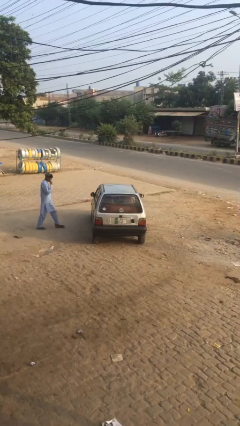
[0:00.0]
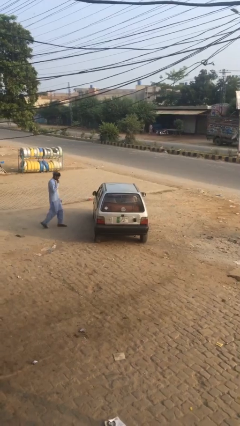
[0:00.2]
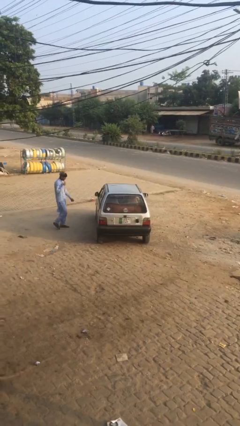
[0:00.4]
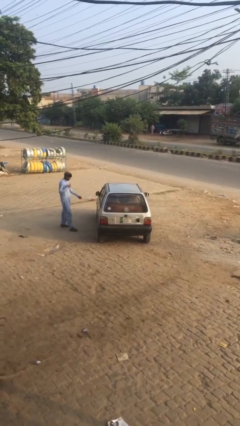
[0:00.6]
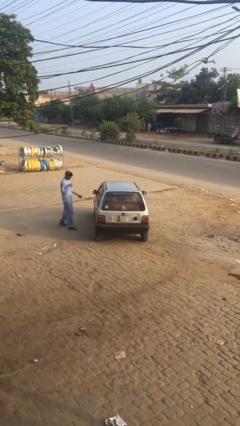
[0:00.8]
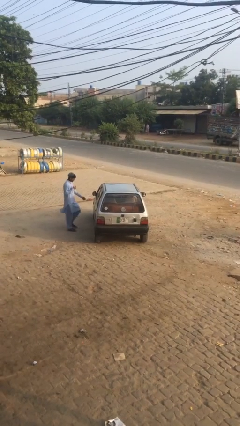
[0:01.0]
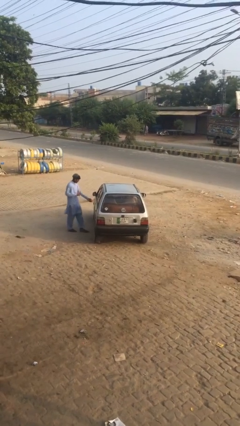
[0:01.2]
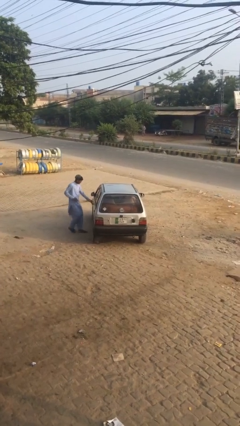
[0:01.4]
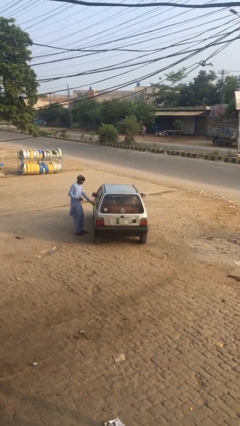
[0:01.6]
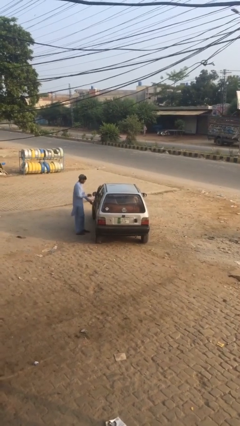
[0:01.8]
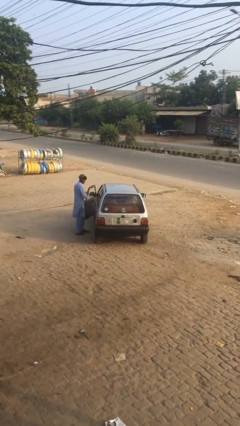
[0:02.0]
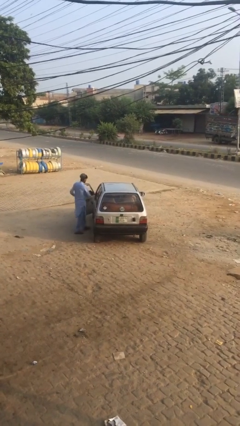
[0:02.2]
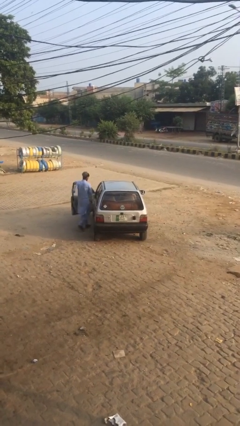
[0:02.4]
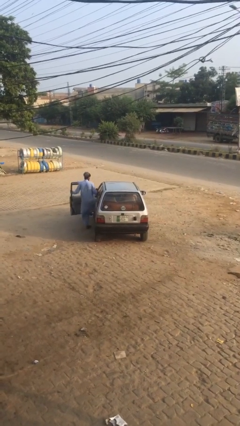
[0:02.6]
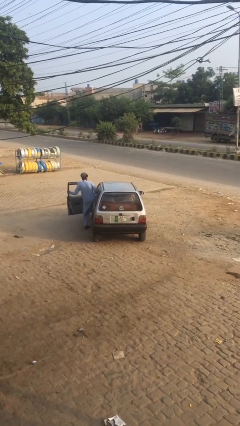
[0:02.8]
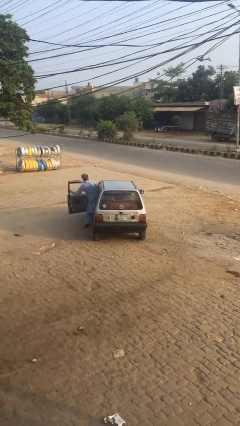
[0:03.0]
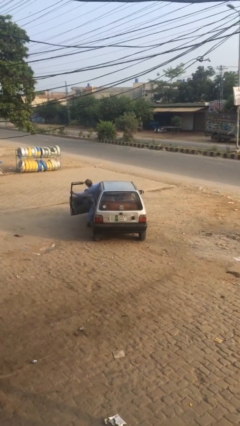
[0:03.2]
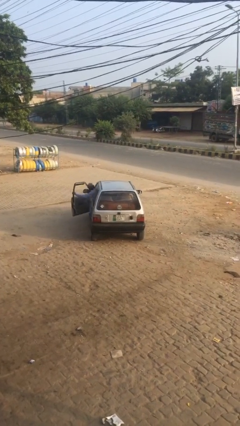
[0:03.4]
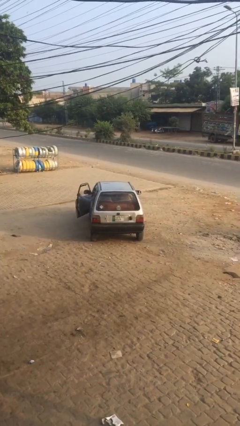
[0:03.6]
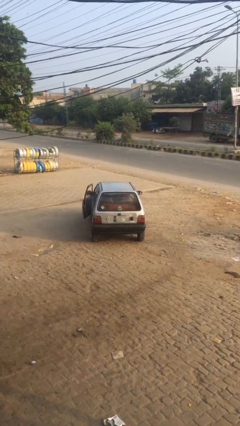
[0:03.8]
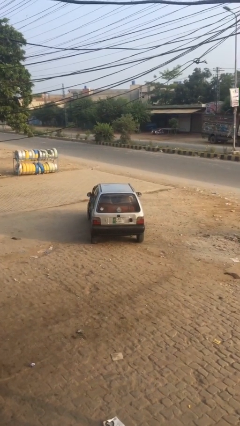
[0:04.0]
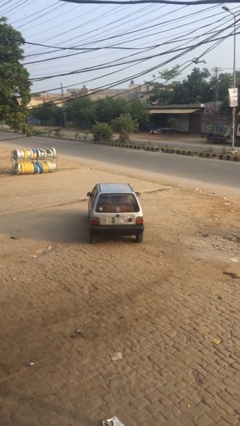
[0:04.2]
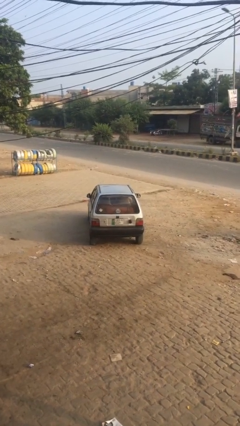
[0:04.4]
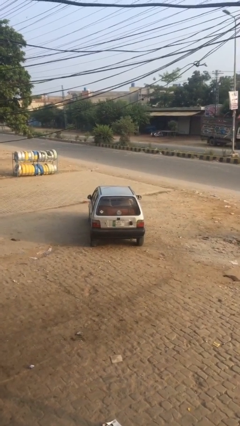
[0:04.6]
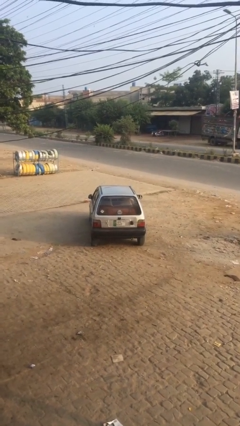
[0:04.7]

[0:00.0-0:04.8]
car picks up person

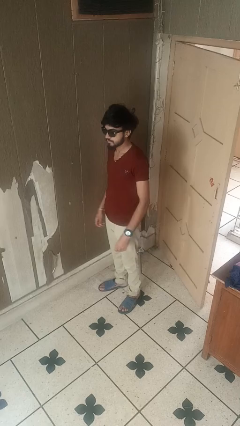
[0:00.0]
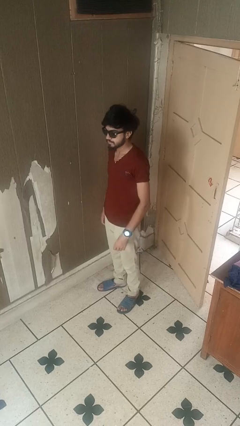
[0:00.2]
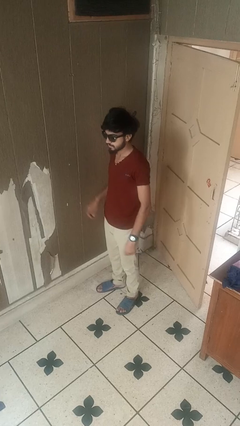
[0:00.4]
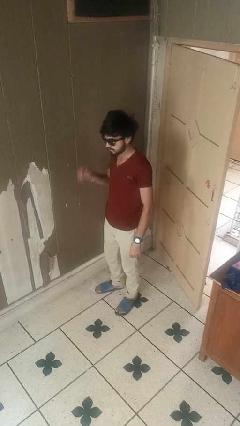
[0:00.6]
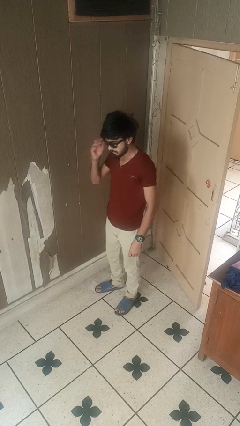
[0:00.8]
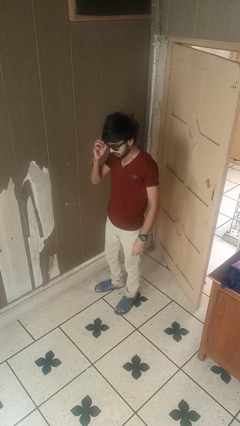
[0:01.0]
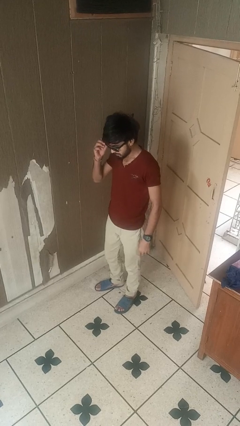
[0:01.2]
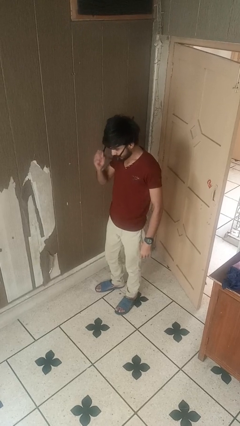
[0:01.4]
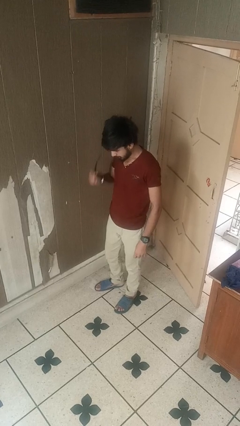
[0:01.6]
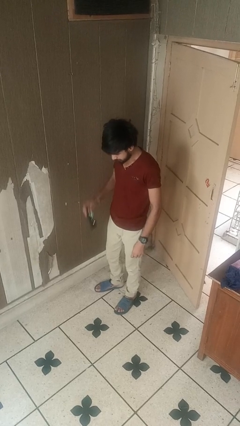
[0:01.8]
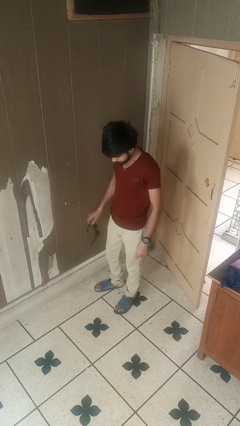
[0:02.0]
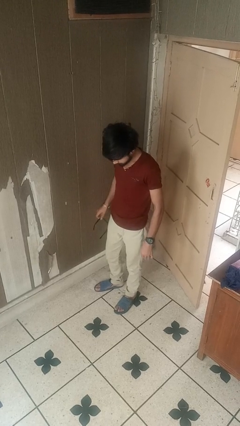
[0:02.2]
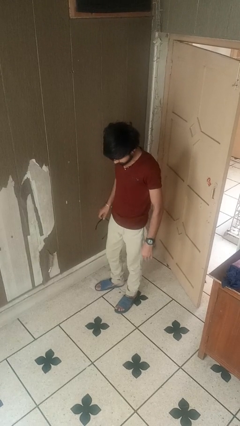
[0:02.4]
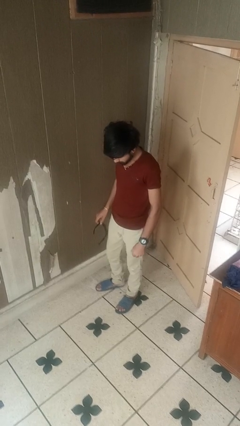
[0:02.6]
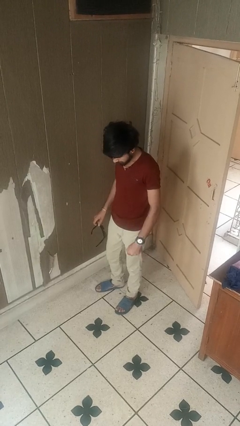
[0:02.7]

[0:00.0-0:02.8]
person takes off sunglasses

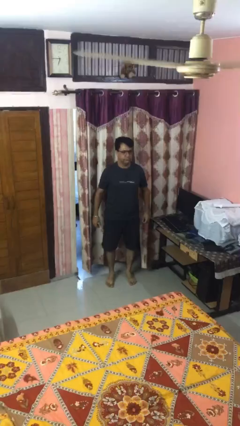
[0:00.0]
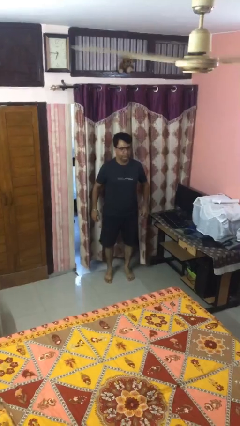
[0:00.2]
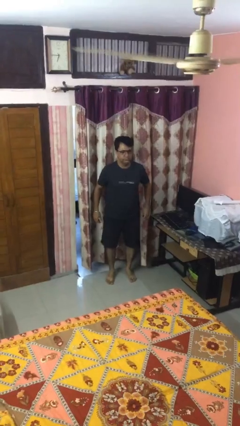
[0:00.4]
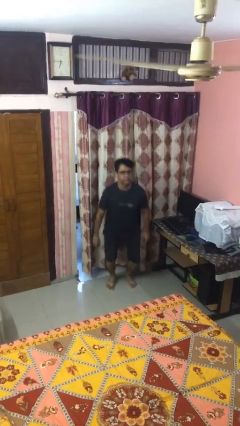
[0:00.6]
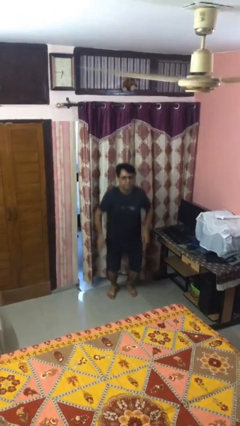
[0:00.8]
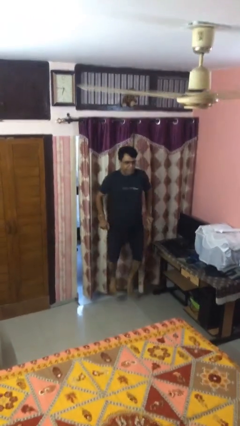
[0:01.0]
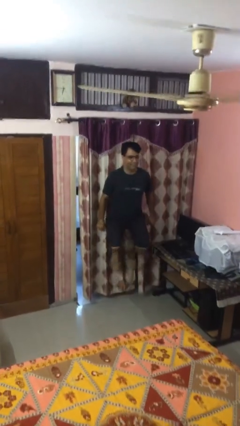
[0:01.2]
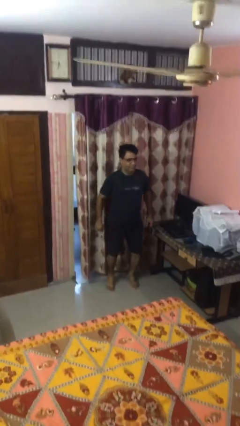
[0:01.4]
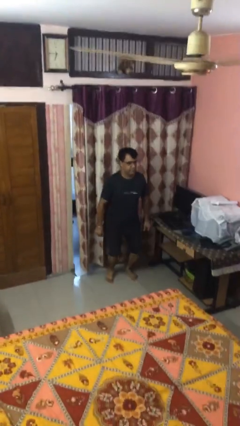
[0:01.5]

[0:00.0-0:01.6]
person jumps

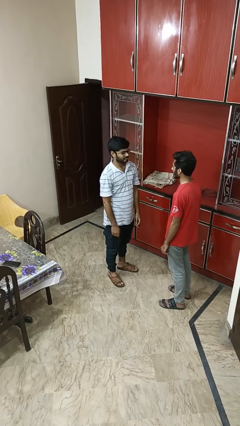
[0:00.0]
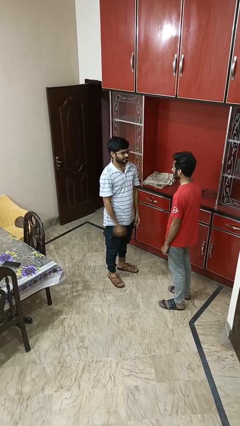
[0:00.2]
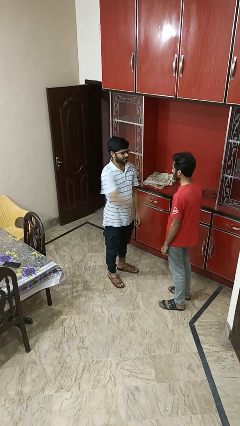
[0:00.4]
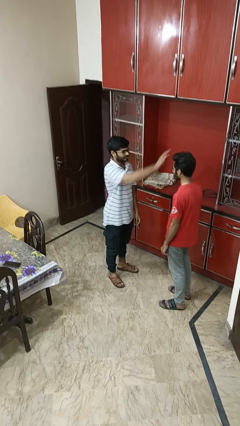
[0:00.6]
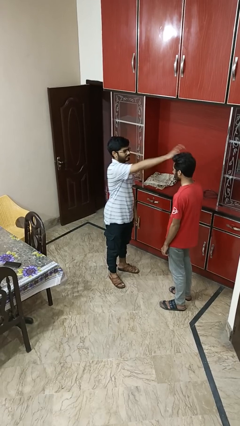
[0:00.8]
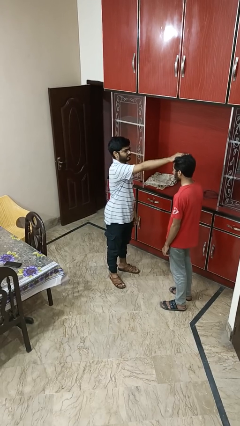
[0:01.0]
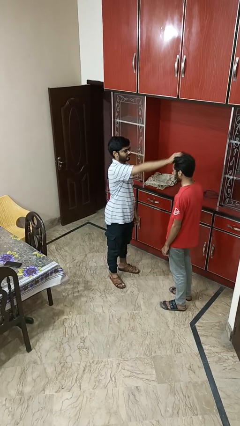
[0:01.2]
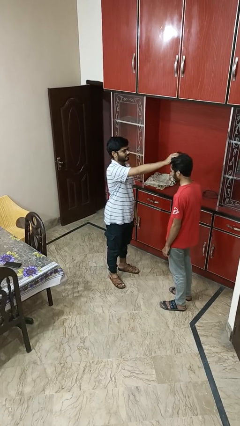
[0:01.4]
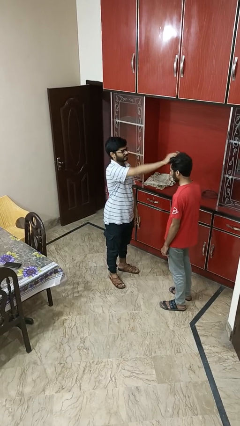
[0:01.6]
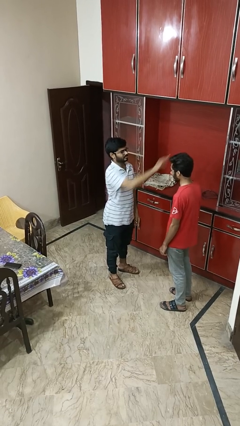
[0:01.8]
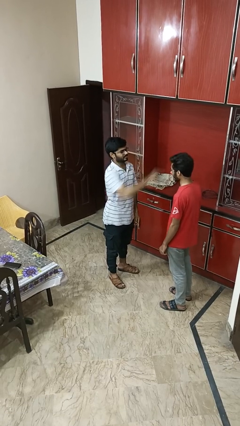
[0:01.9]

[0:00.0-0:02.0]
person grabs person by hair

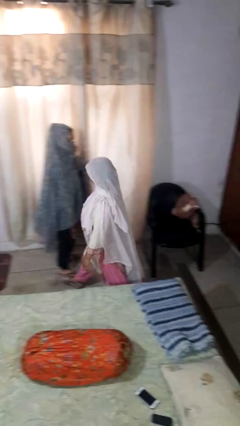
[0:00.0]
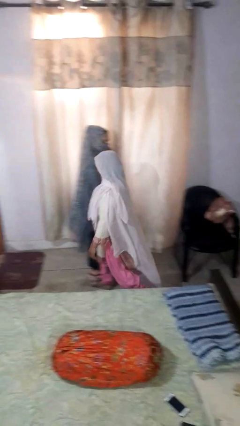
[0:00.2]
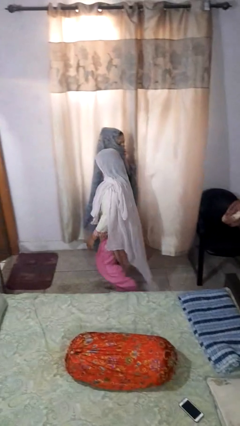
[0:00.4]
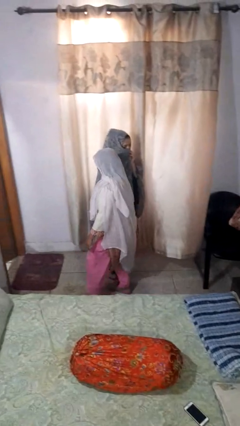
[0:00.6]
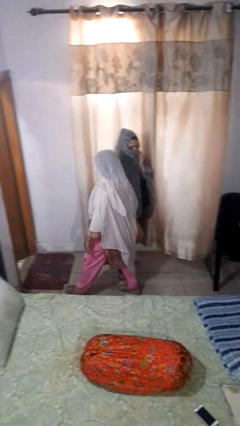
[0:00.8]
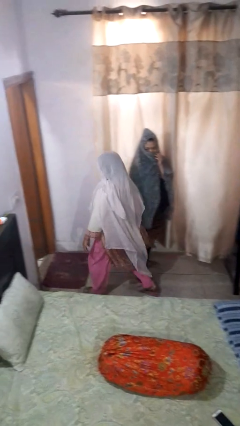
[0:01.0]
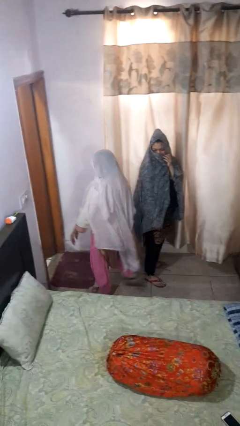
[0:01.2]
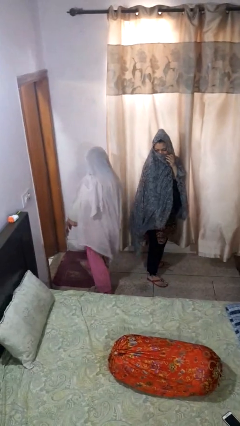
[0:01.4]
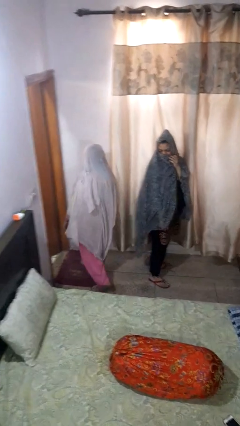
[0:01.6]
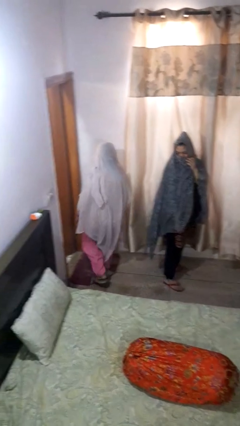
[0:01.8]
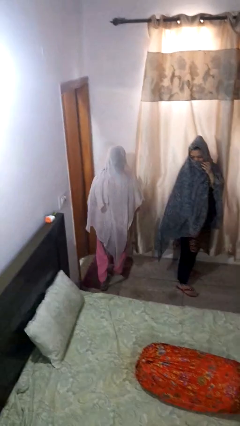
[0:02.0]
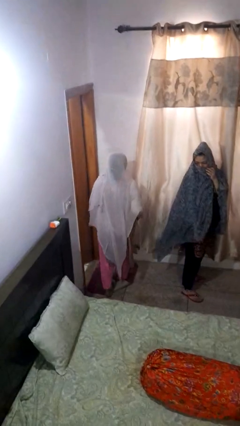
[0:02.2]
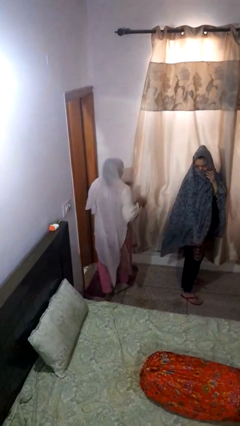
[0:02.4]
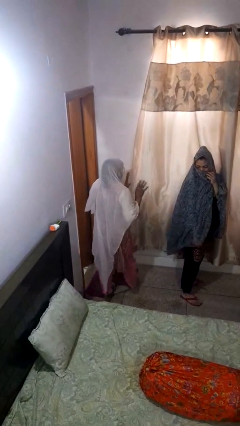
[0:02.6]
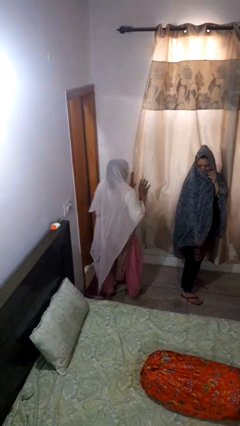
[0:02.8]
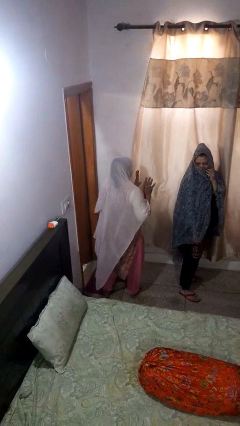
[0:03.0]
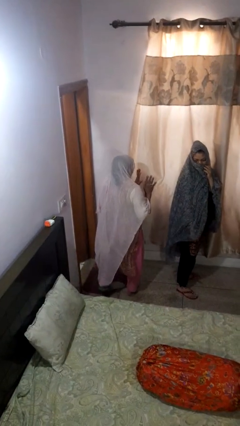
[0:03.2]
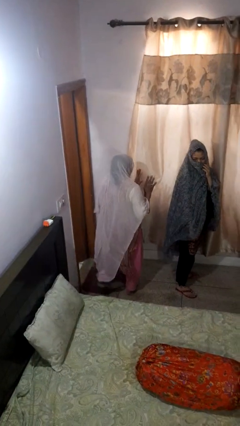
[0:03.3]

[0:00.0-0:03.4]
person bumps into person

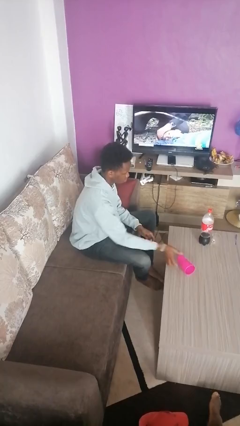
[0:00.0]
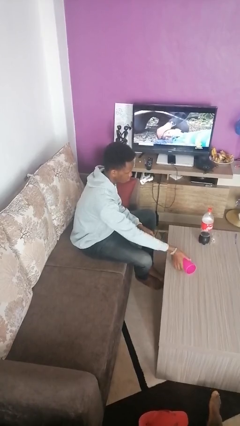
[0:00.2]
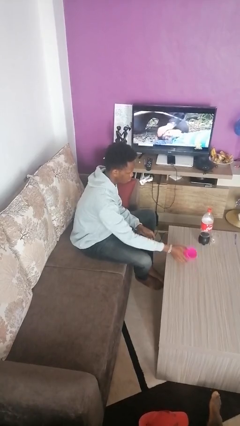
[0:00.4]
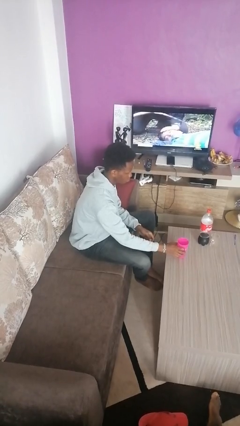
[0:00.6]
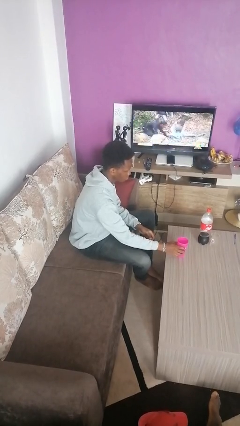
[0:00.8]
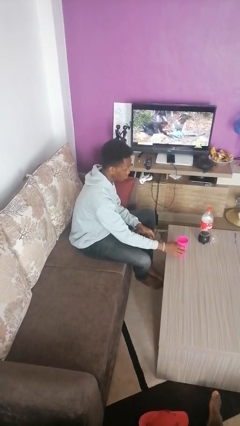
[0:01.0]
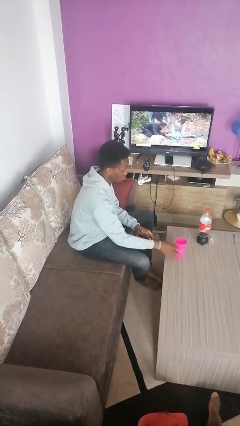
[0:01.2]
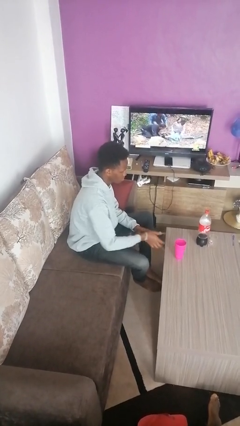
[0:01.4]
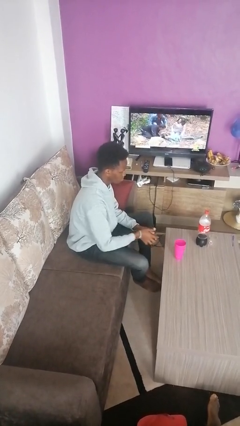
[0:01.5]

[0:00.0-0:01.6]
person sets upright glass

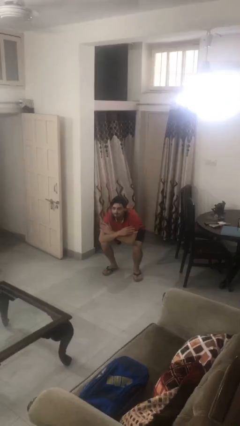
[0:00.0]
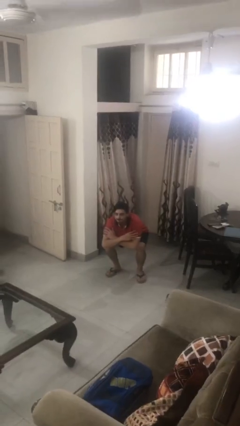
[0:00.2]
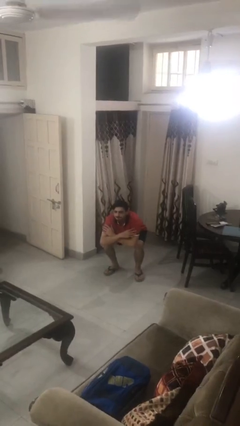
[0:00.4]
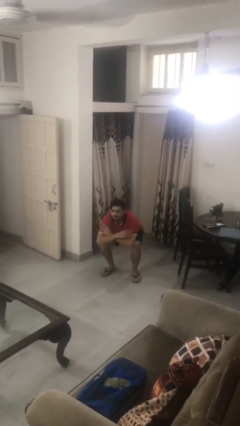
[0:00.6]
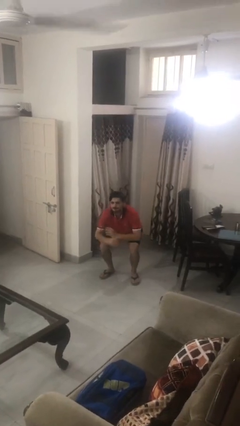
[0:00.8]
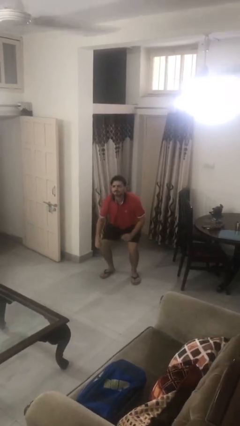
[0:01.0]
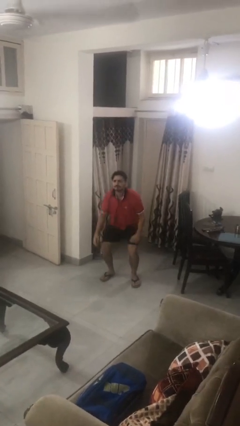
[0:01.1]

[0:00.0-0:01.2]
person stands up
